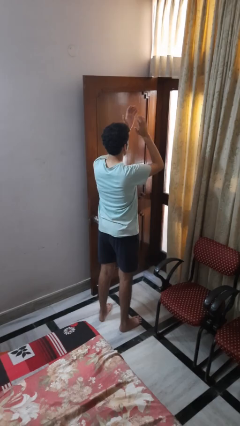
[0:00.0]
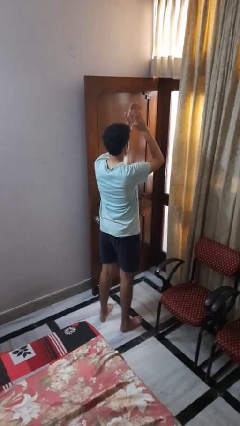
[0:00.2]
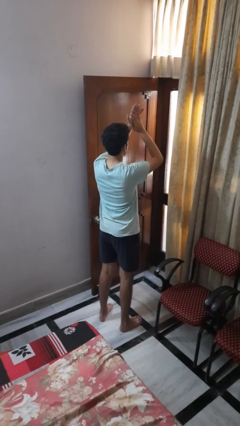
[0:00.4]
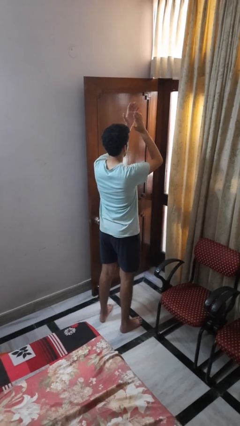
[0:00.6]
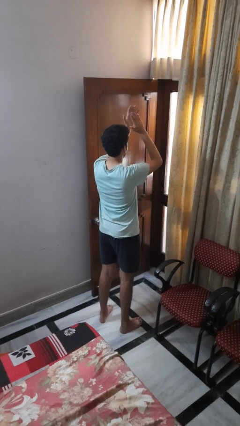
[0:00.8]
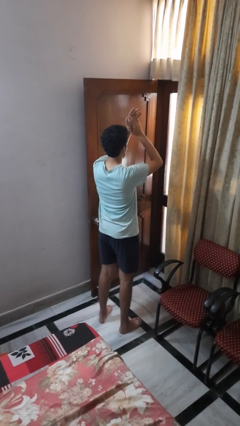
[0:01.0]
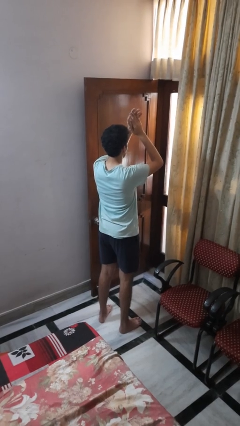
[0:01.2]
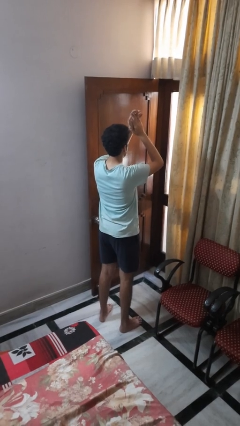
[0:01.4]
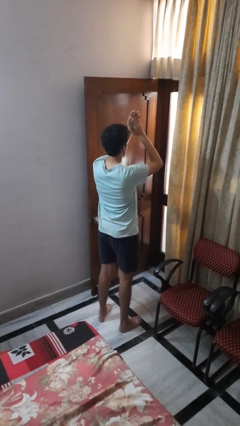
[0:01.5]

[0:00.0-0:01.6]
person claps hands

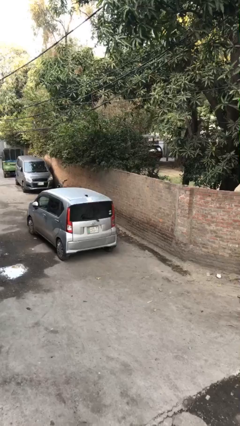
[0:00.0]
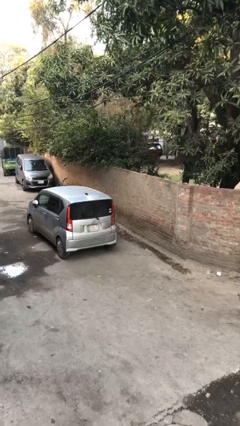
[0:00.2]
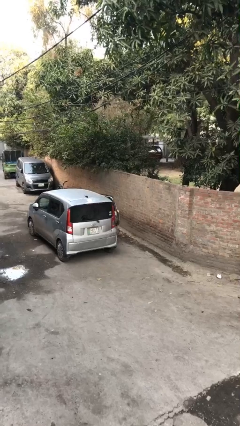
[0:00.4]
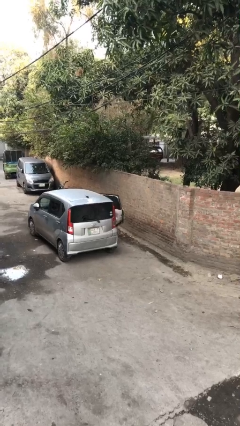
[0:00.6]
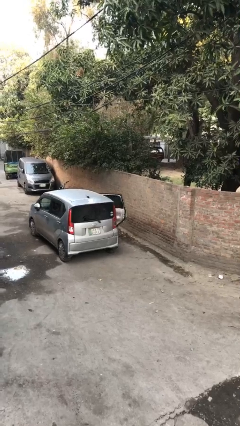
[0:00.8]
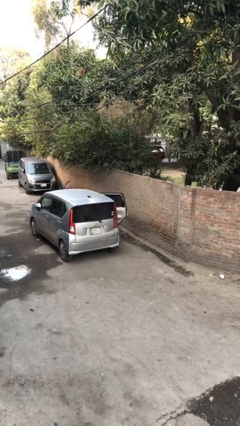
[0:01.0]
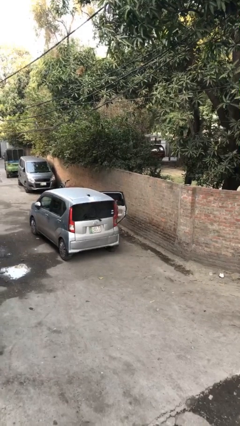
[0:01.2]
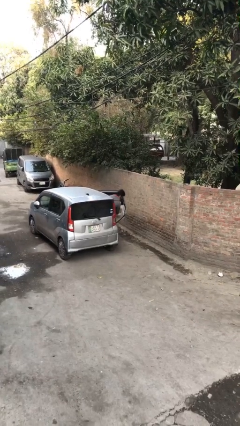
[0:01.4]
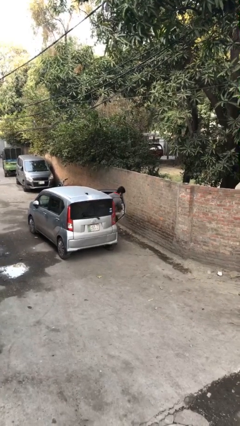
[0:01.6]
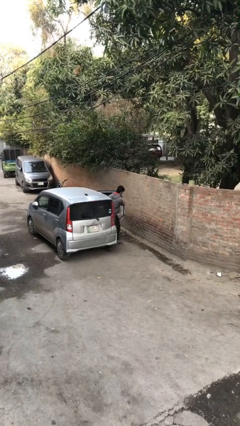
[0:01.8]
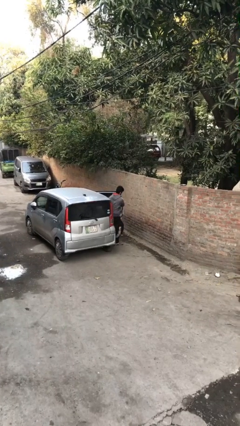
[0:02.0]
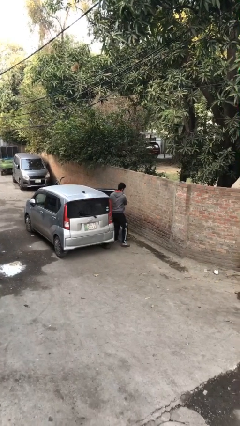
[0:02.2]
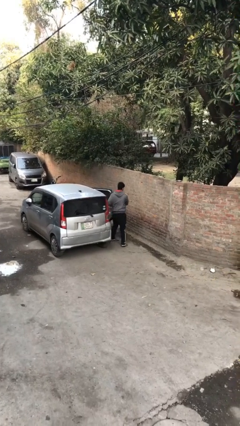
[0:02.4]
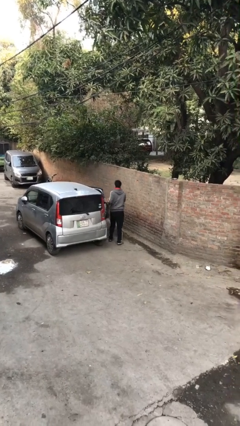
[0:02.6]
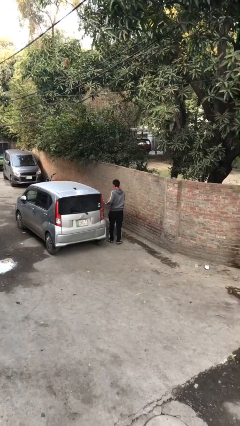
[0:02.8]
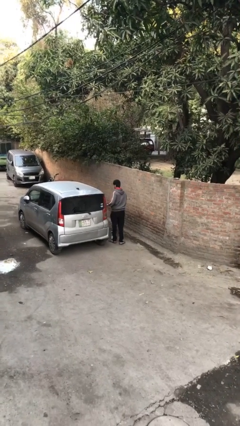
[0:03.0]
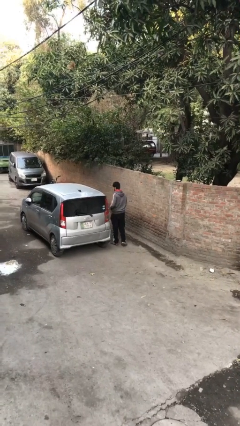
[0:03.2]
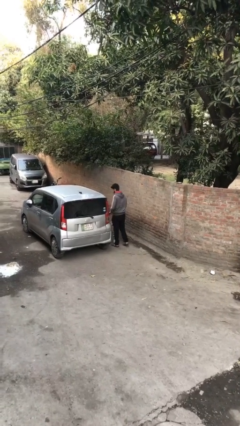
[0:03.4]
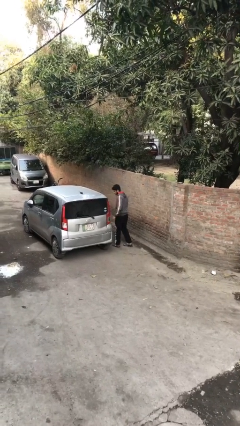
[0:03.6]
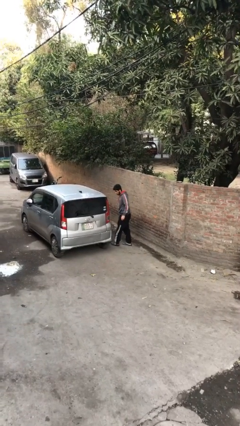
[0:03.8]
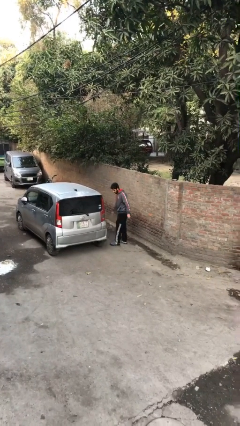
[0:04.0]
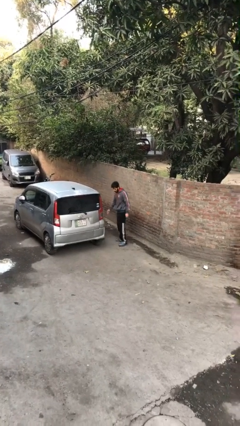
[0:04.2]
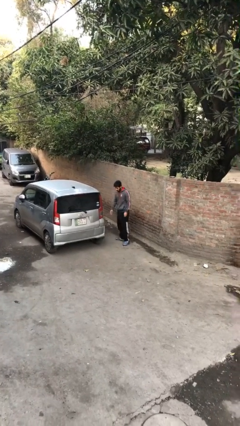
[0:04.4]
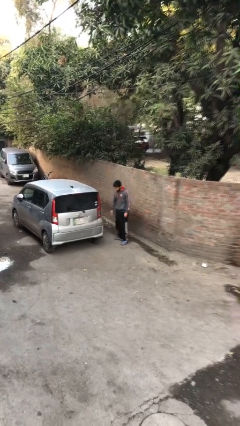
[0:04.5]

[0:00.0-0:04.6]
car drops off person

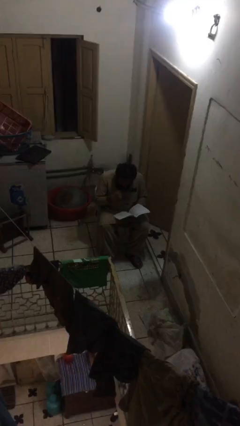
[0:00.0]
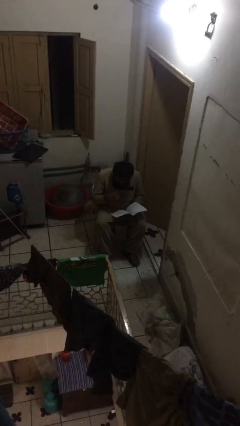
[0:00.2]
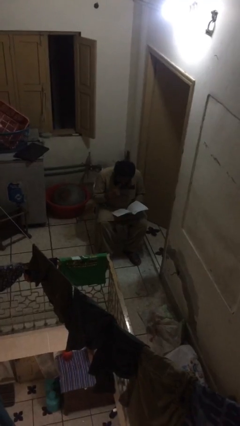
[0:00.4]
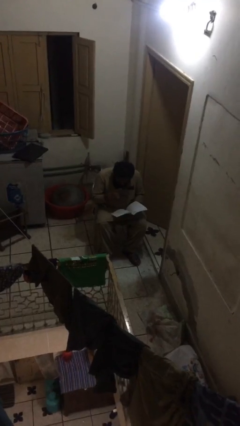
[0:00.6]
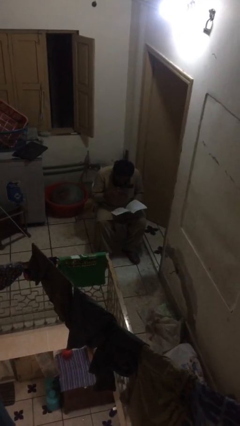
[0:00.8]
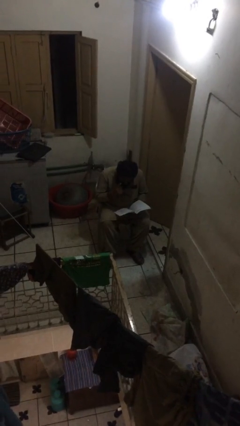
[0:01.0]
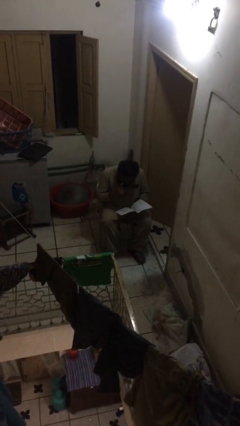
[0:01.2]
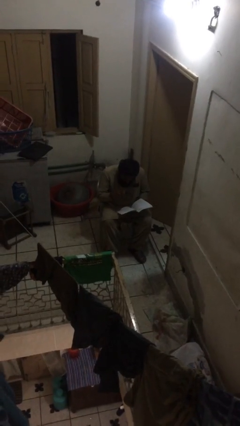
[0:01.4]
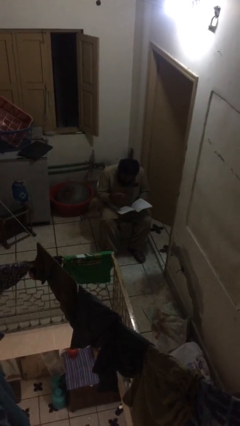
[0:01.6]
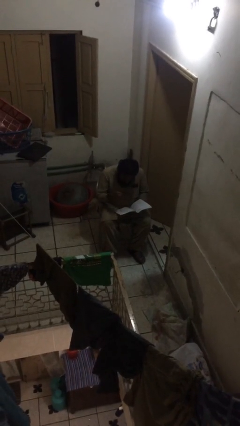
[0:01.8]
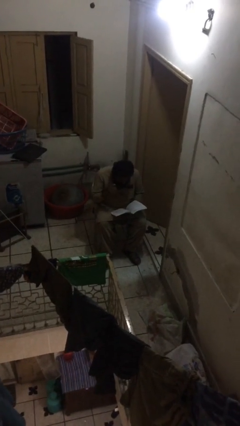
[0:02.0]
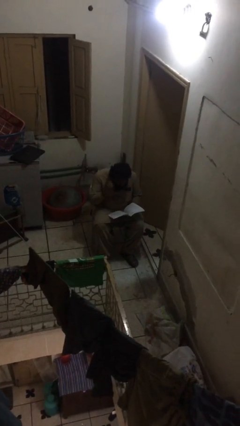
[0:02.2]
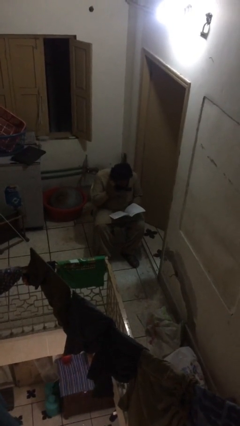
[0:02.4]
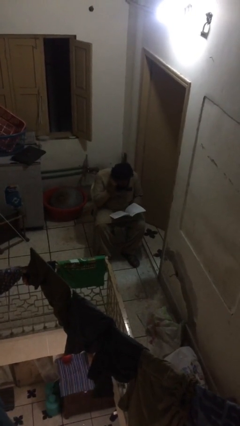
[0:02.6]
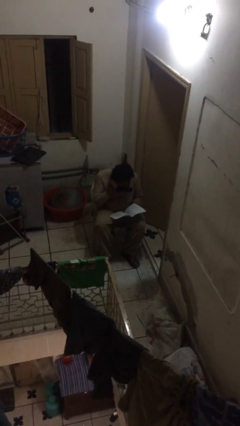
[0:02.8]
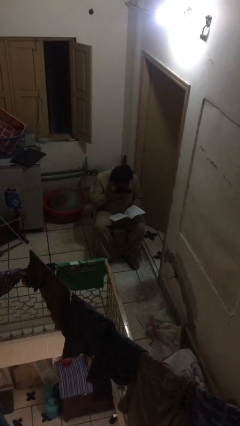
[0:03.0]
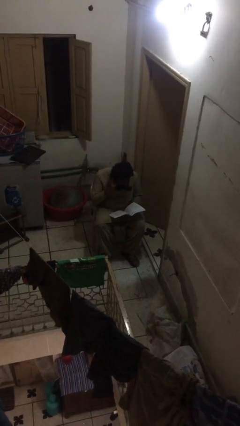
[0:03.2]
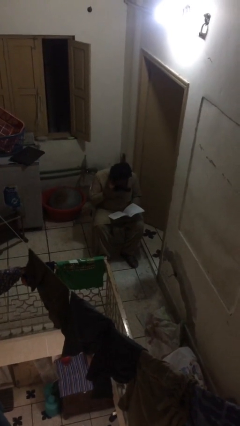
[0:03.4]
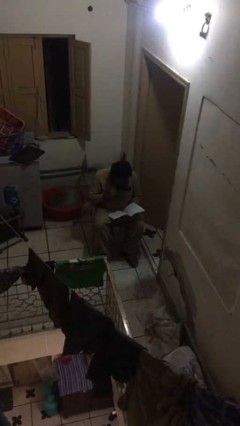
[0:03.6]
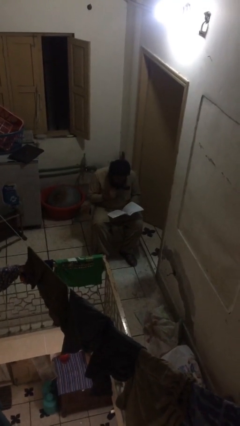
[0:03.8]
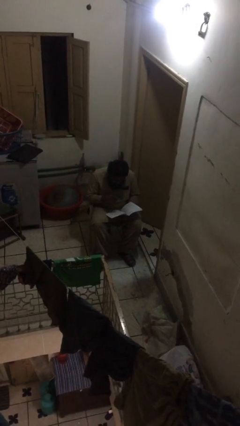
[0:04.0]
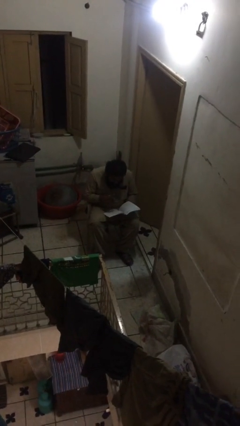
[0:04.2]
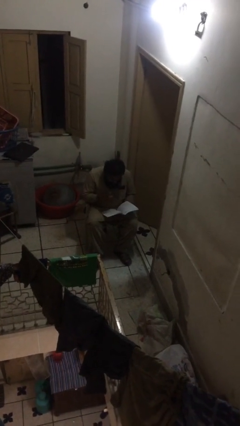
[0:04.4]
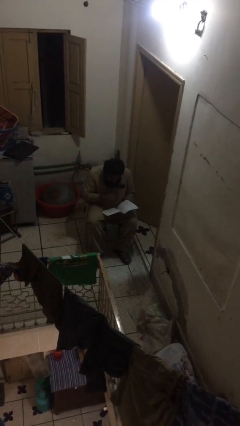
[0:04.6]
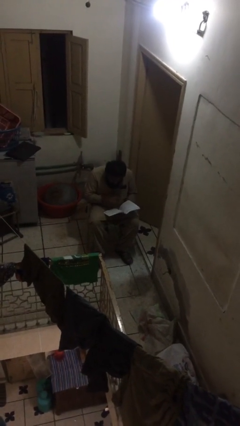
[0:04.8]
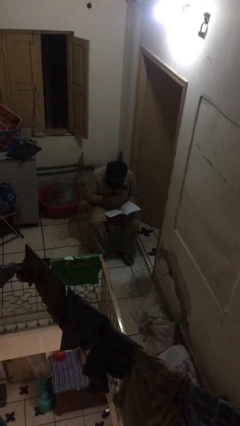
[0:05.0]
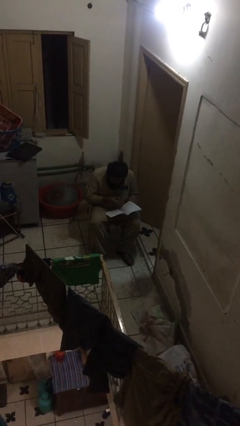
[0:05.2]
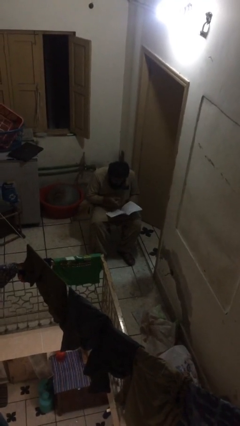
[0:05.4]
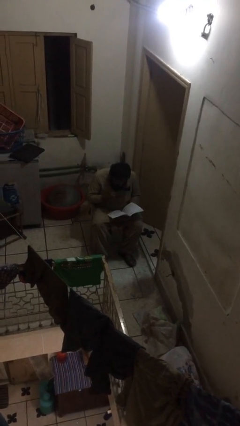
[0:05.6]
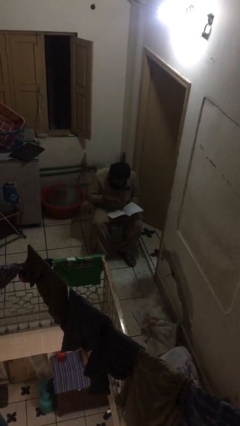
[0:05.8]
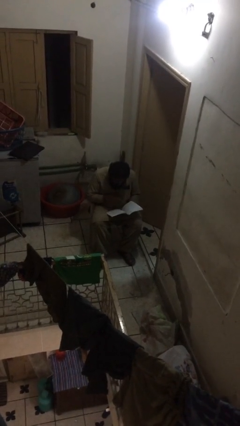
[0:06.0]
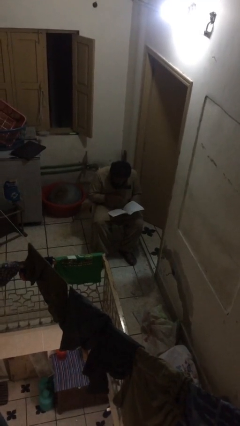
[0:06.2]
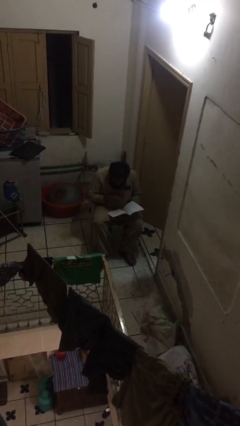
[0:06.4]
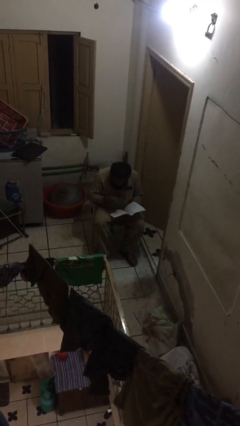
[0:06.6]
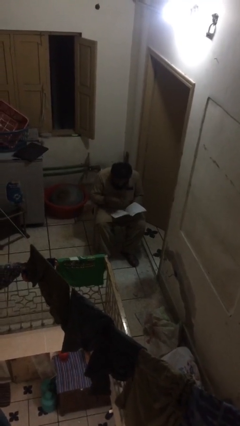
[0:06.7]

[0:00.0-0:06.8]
person reads document

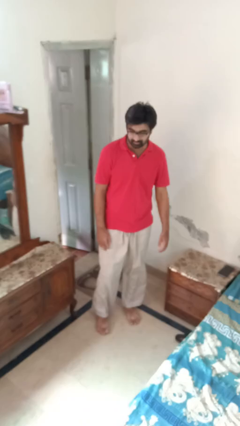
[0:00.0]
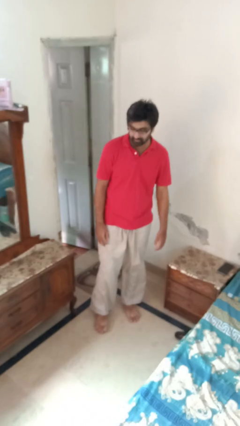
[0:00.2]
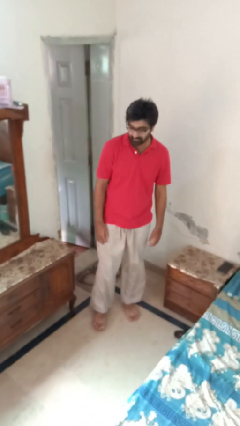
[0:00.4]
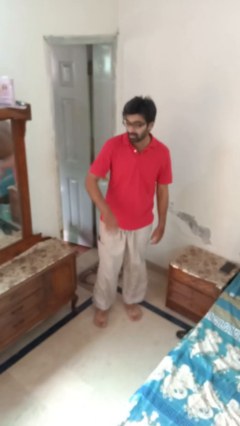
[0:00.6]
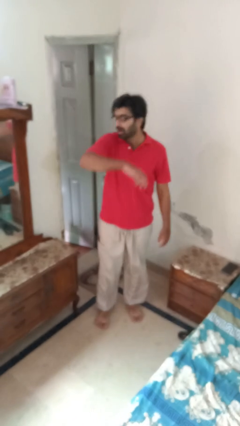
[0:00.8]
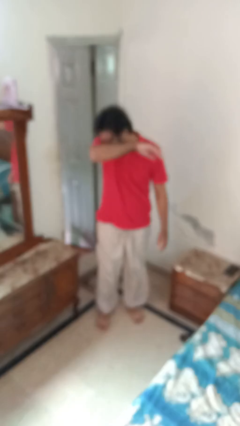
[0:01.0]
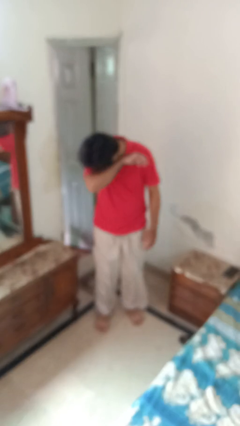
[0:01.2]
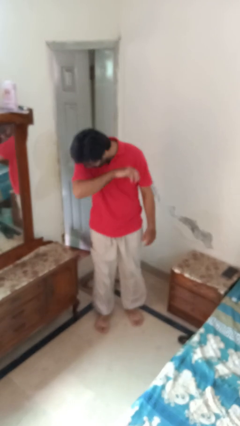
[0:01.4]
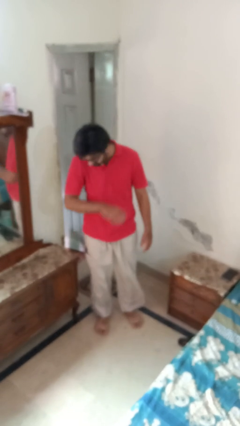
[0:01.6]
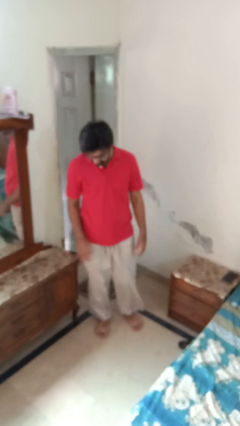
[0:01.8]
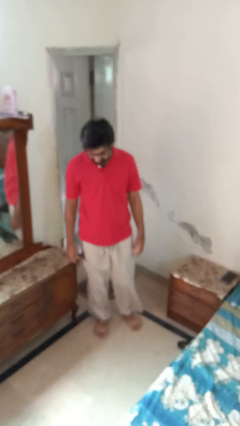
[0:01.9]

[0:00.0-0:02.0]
person sneezes into arm

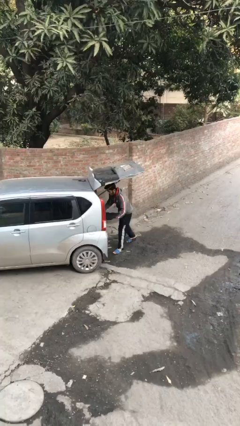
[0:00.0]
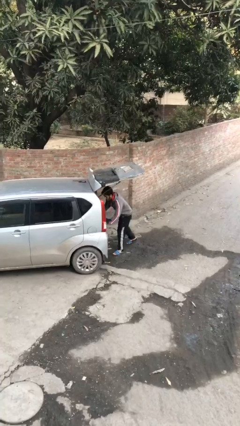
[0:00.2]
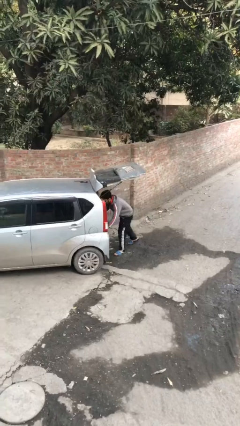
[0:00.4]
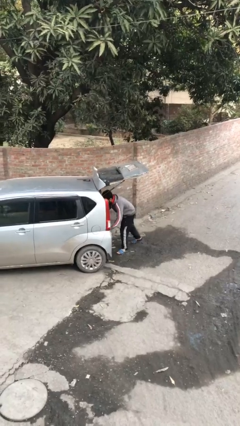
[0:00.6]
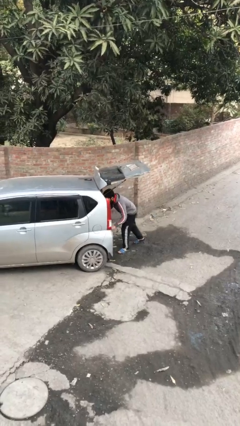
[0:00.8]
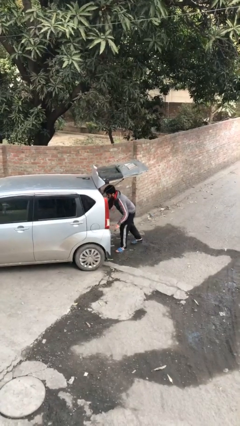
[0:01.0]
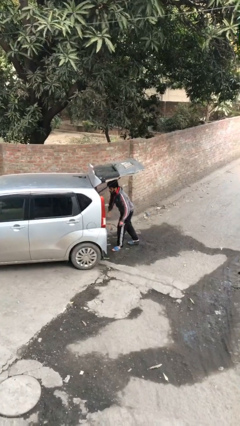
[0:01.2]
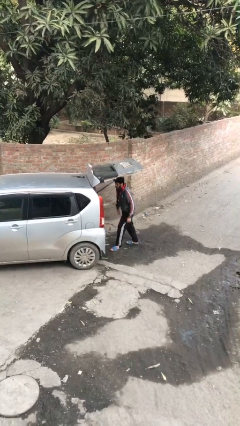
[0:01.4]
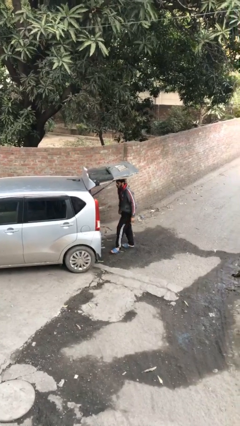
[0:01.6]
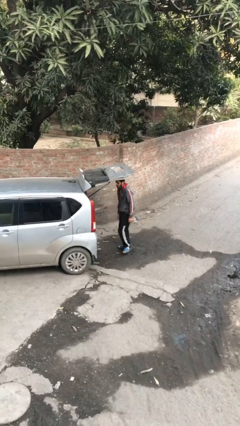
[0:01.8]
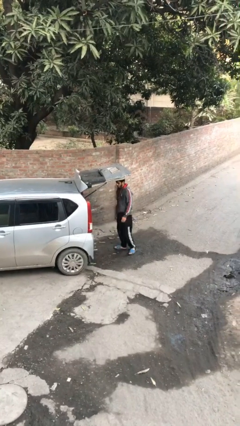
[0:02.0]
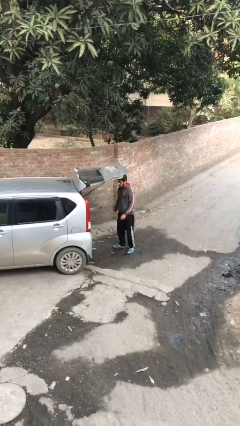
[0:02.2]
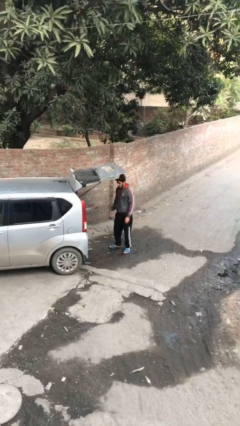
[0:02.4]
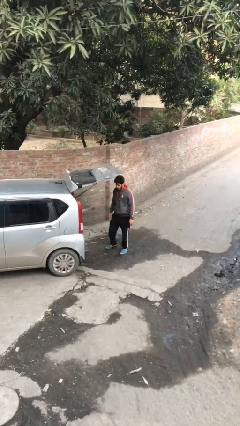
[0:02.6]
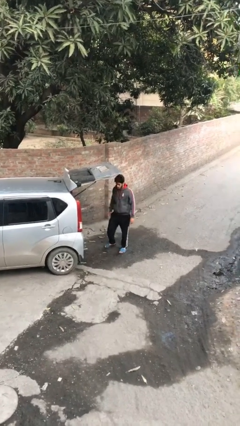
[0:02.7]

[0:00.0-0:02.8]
person loads car
